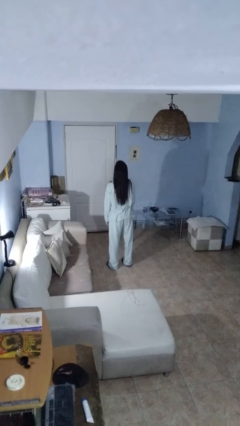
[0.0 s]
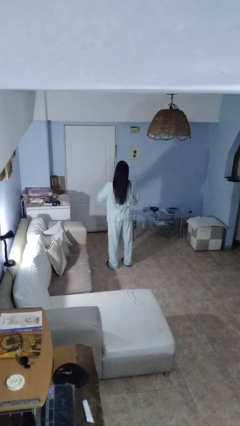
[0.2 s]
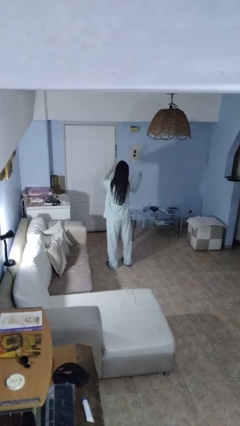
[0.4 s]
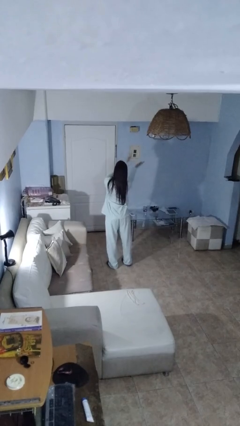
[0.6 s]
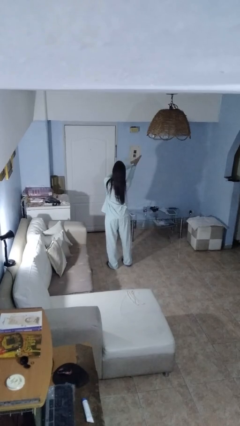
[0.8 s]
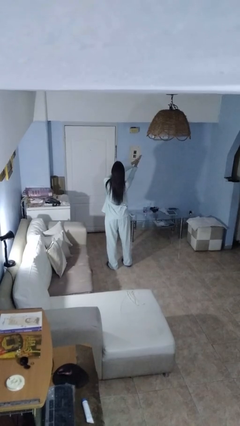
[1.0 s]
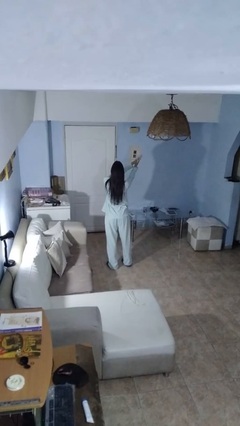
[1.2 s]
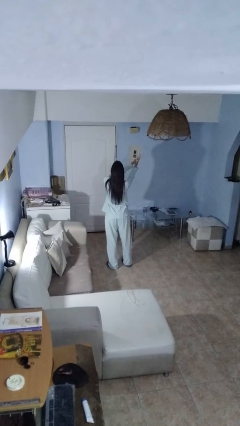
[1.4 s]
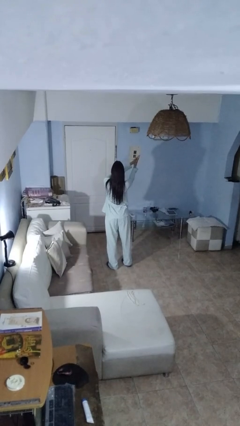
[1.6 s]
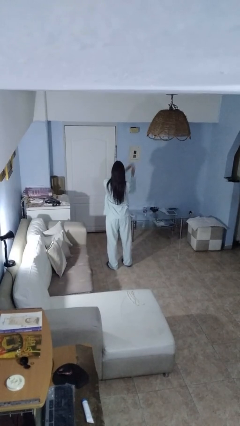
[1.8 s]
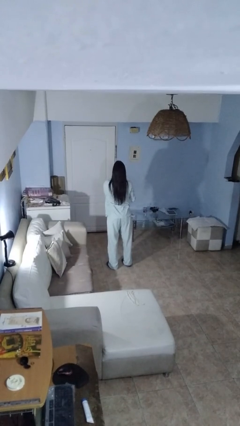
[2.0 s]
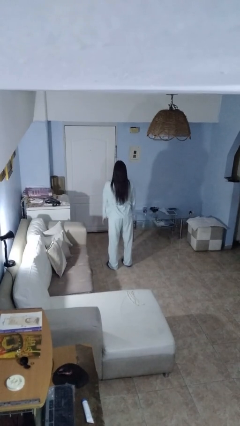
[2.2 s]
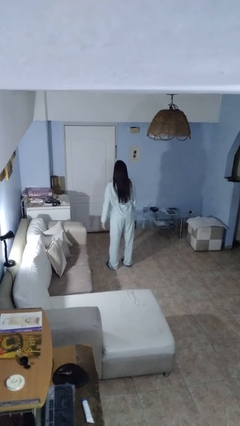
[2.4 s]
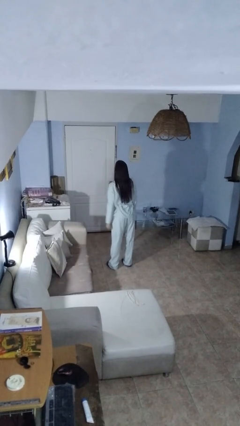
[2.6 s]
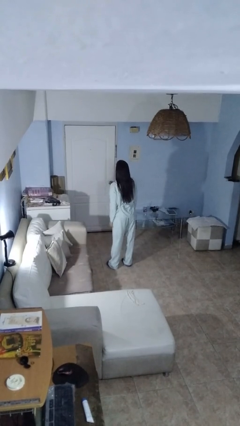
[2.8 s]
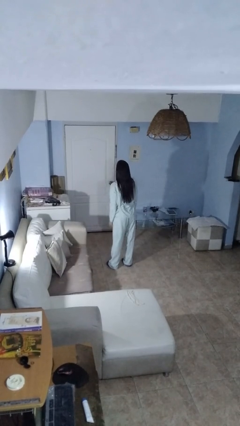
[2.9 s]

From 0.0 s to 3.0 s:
person claps hands

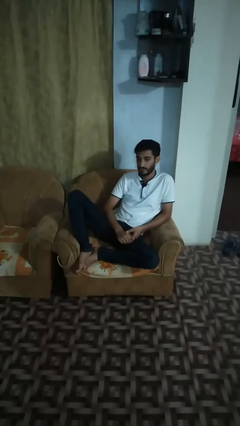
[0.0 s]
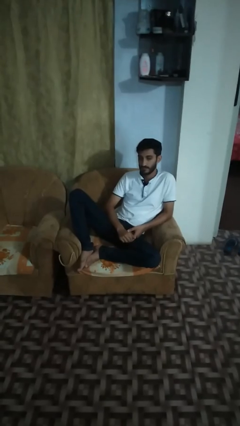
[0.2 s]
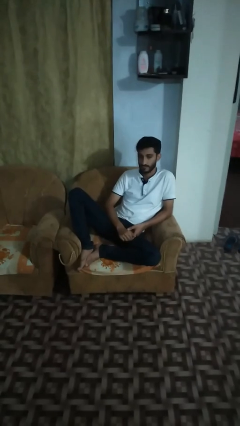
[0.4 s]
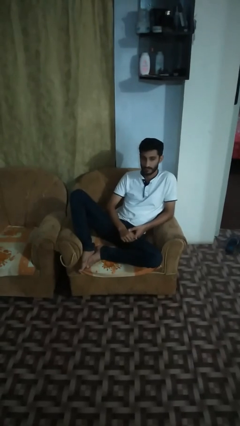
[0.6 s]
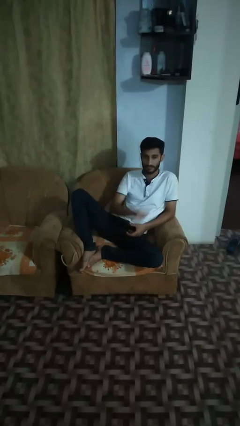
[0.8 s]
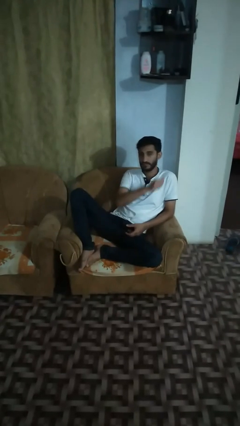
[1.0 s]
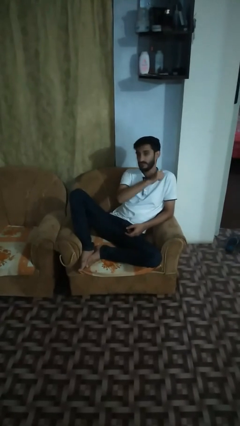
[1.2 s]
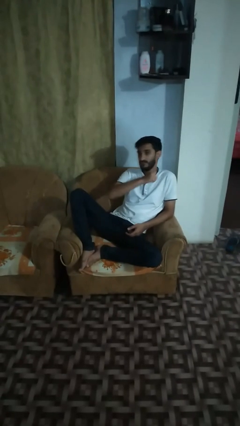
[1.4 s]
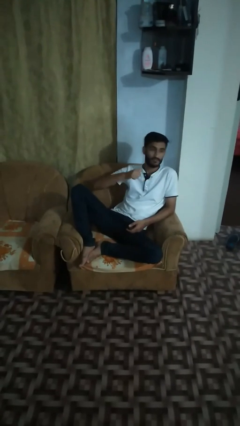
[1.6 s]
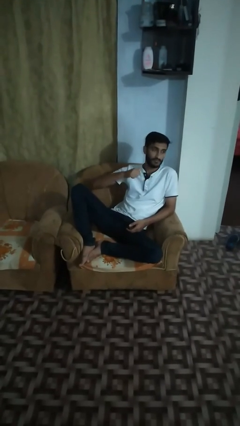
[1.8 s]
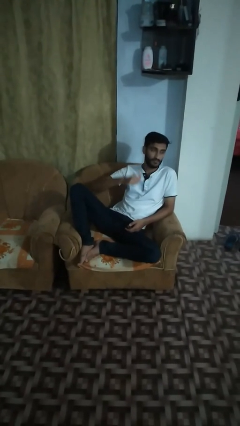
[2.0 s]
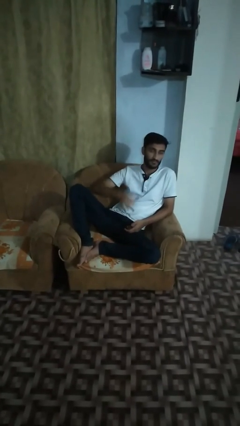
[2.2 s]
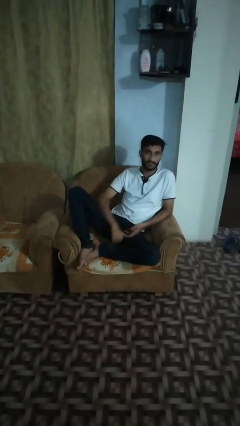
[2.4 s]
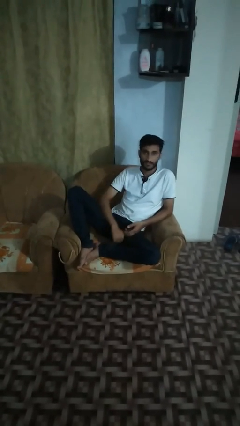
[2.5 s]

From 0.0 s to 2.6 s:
person gestures cut

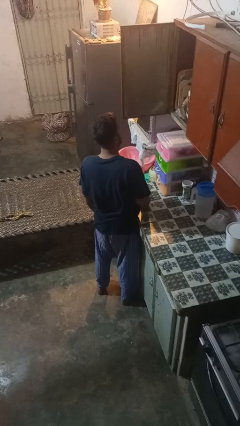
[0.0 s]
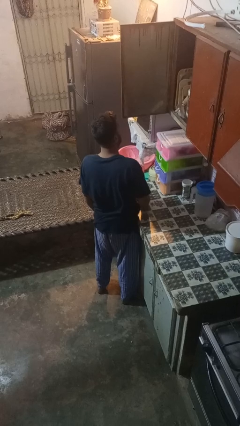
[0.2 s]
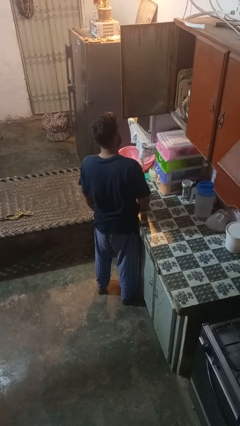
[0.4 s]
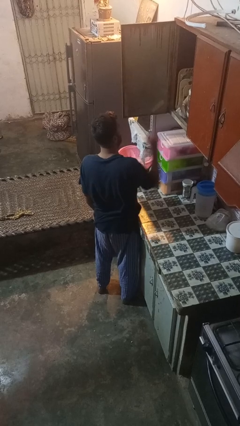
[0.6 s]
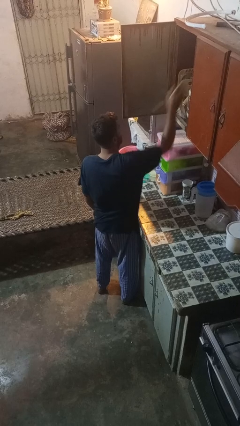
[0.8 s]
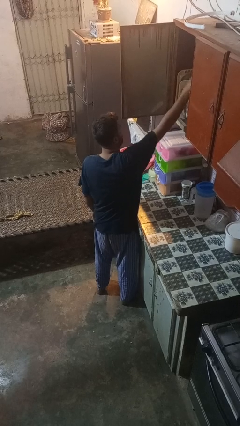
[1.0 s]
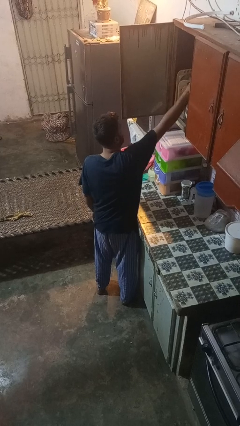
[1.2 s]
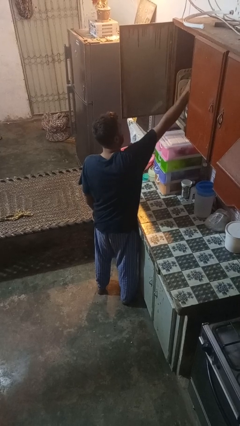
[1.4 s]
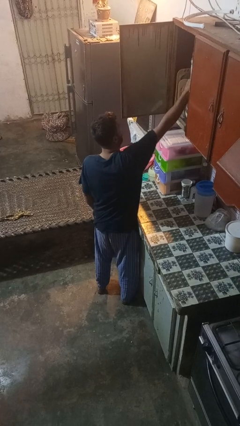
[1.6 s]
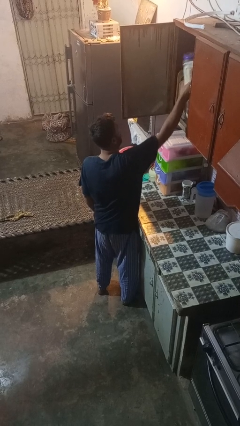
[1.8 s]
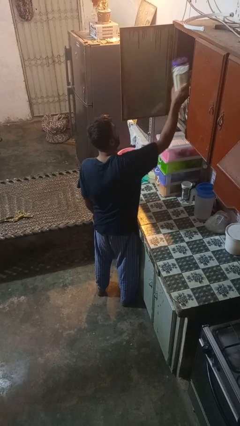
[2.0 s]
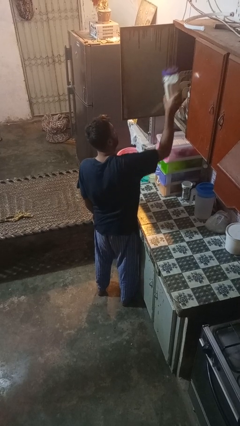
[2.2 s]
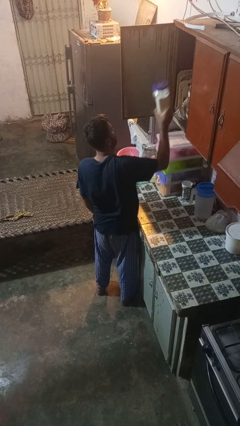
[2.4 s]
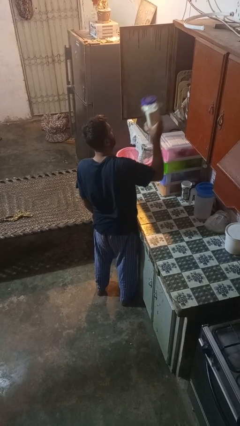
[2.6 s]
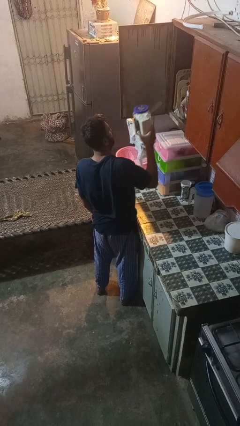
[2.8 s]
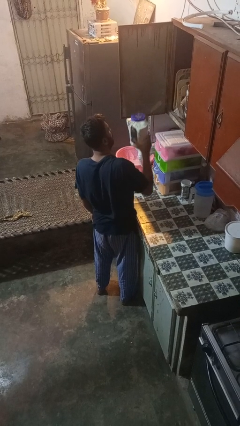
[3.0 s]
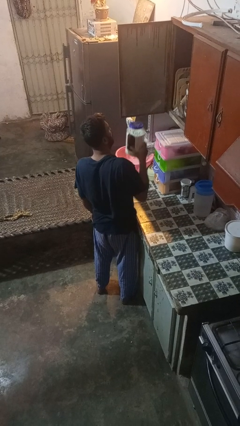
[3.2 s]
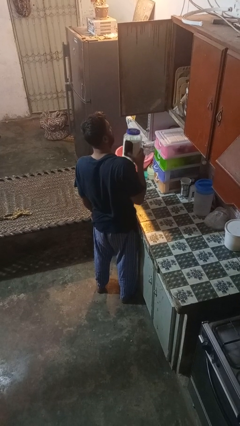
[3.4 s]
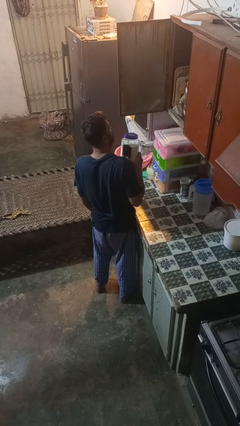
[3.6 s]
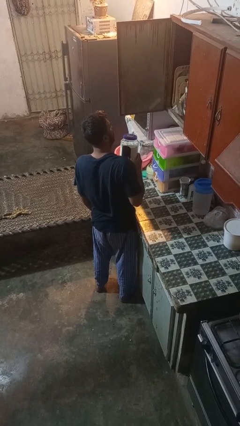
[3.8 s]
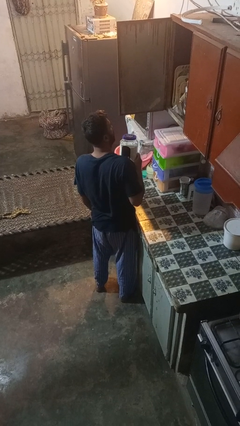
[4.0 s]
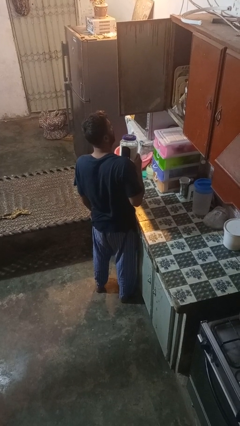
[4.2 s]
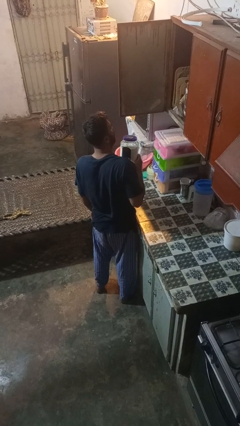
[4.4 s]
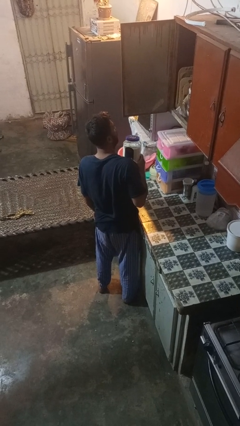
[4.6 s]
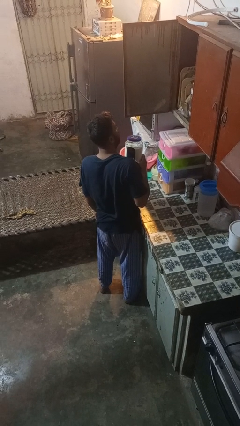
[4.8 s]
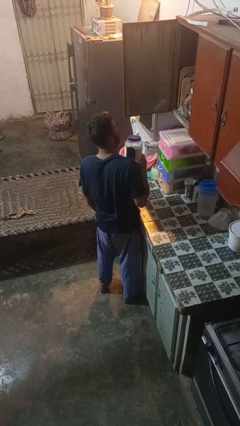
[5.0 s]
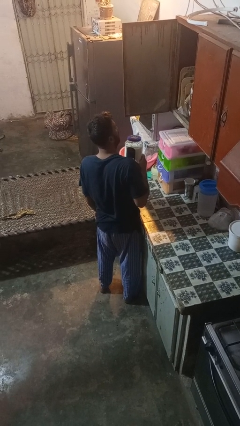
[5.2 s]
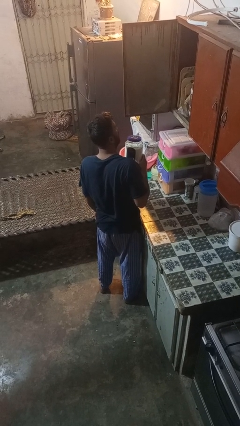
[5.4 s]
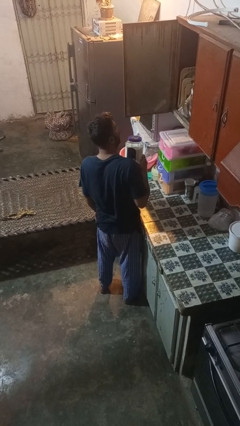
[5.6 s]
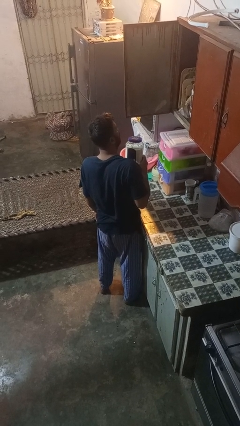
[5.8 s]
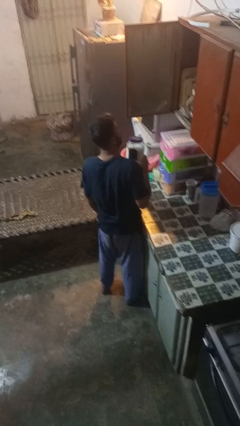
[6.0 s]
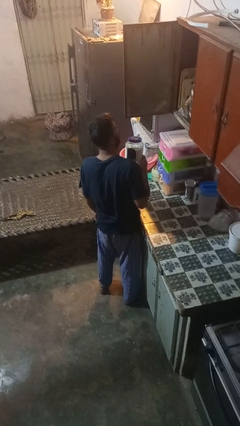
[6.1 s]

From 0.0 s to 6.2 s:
person puts object in cabinet

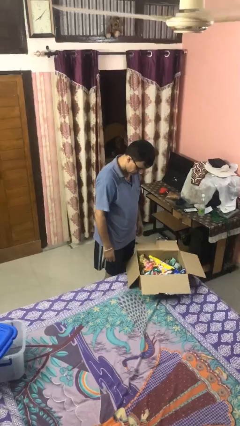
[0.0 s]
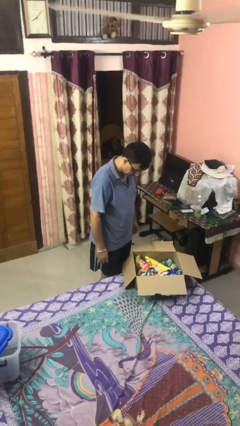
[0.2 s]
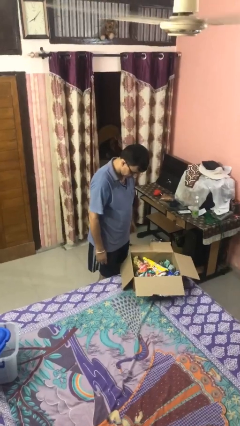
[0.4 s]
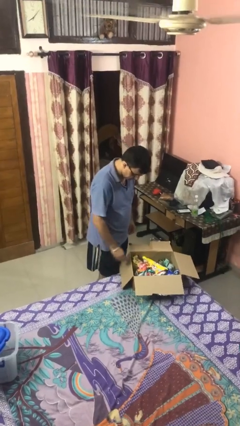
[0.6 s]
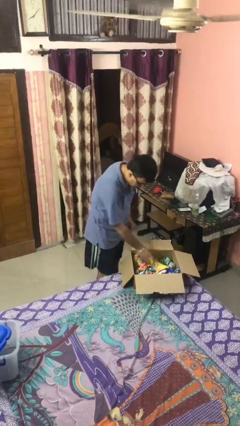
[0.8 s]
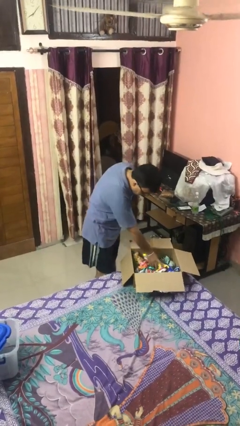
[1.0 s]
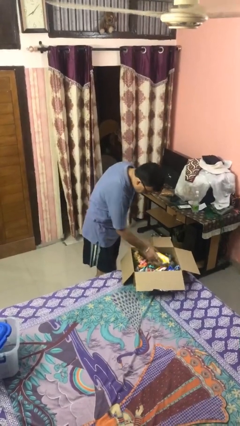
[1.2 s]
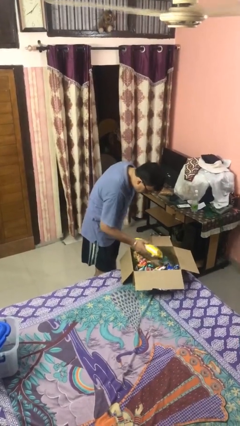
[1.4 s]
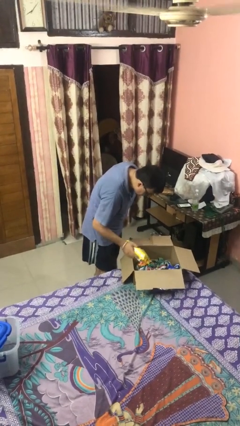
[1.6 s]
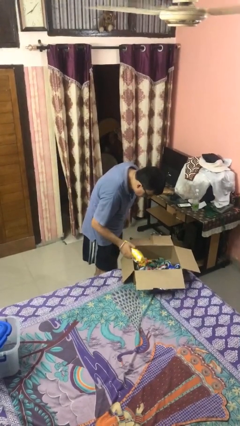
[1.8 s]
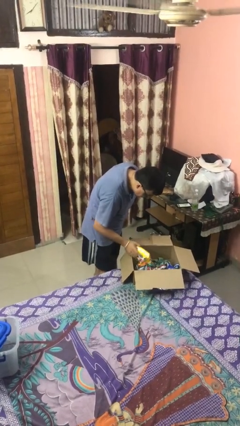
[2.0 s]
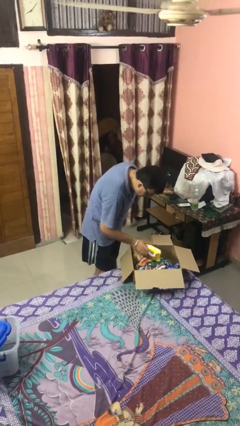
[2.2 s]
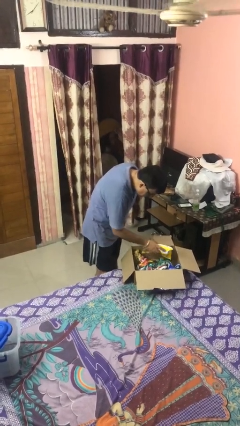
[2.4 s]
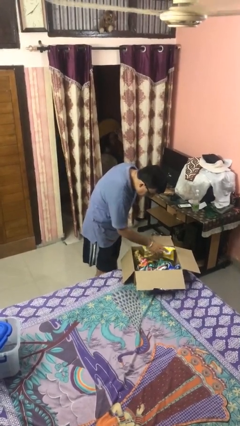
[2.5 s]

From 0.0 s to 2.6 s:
person searches in box

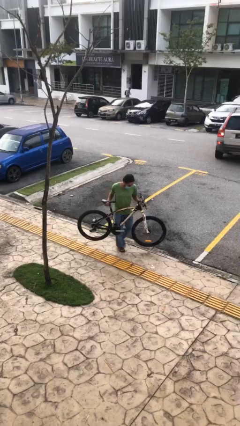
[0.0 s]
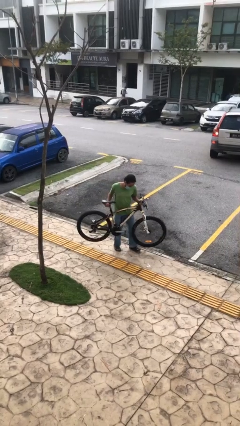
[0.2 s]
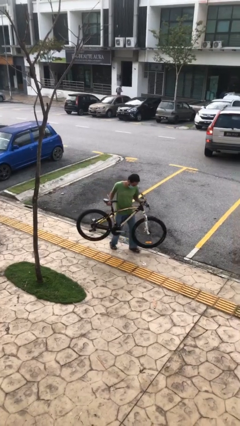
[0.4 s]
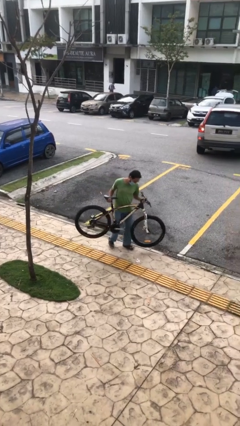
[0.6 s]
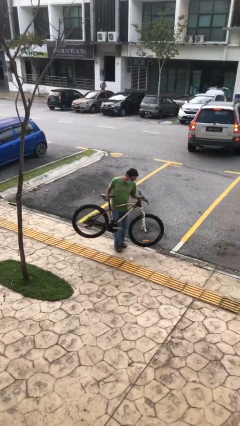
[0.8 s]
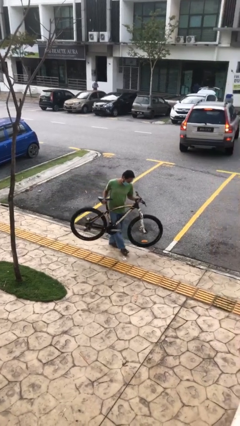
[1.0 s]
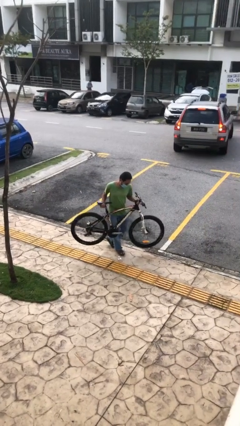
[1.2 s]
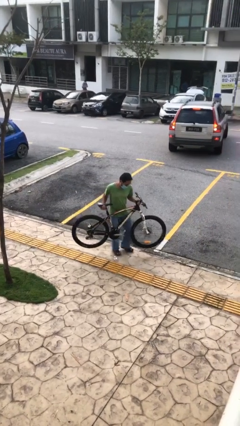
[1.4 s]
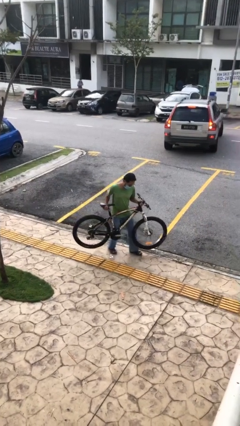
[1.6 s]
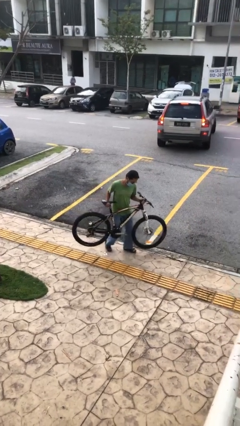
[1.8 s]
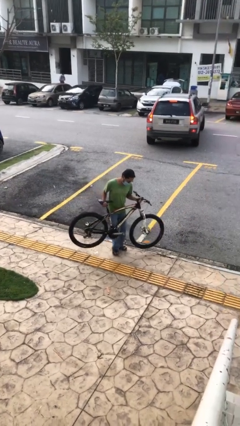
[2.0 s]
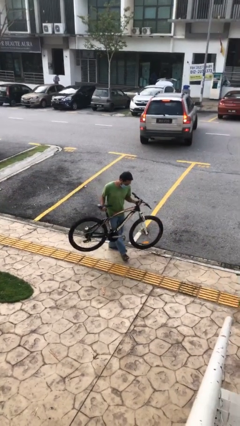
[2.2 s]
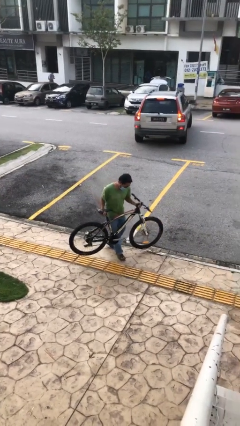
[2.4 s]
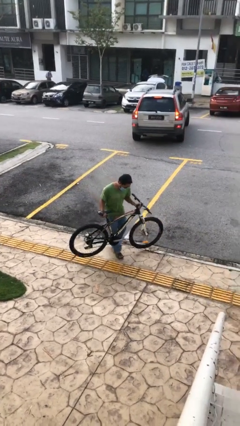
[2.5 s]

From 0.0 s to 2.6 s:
person carries heavy object

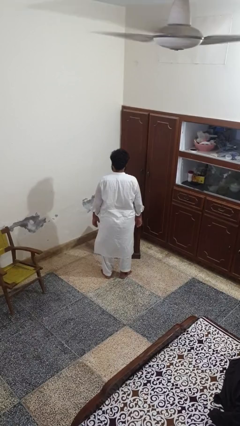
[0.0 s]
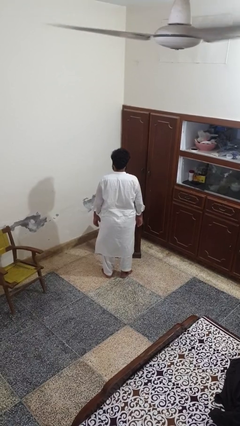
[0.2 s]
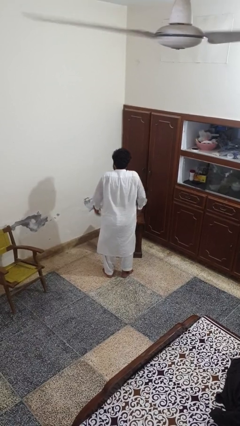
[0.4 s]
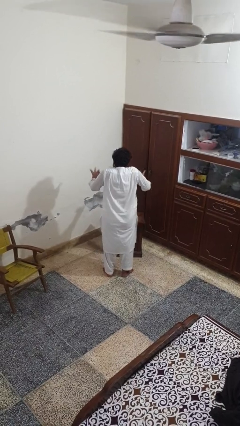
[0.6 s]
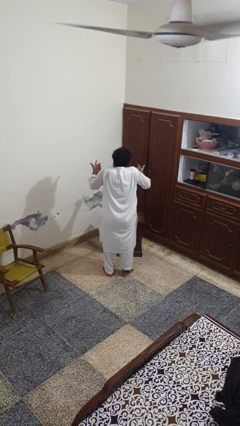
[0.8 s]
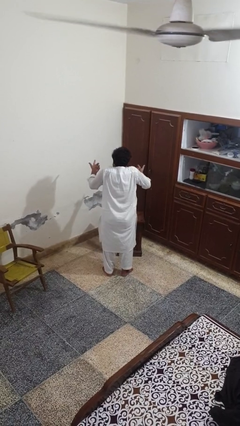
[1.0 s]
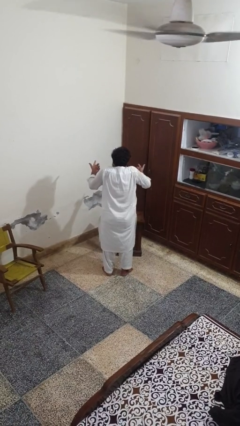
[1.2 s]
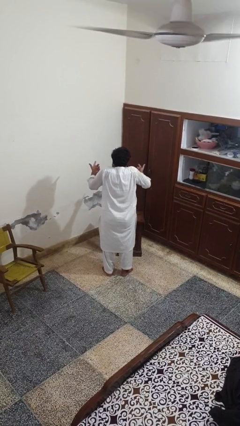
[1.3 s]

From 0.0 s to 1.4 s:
person shrugs
